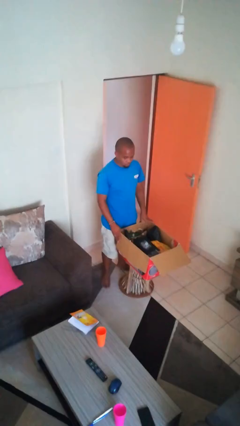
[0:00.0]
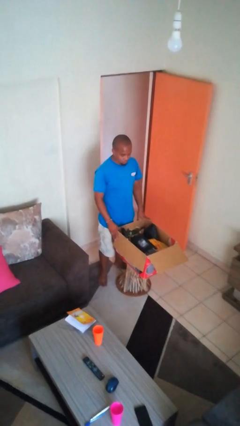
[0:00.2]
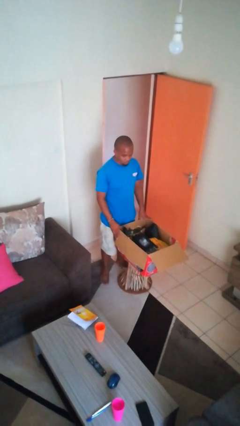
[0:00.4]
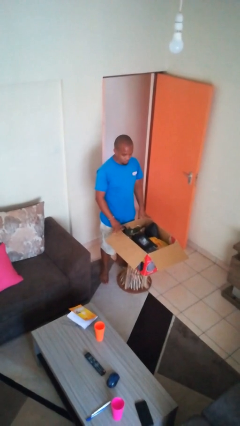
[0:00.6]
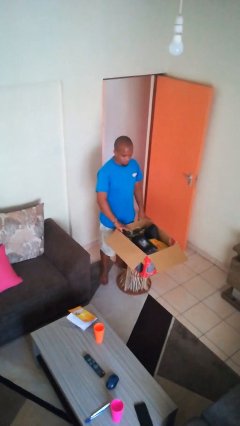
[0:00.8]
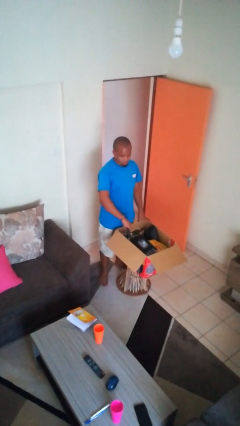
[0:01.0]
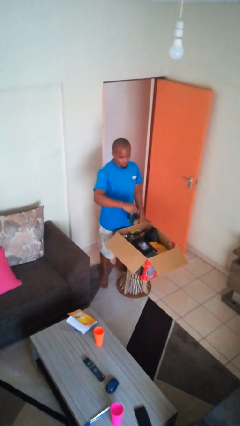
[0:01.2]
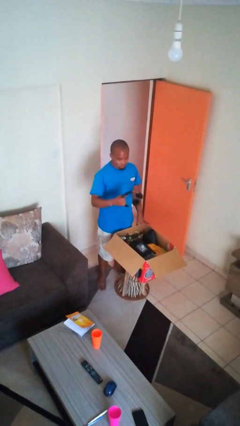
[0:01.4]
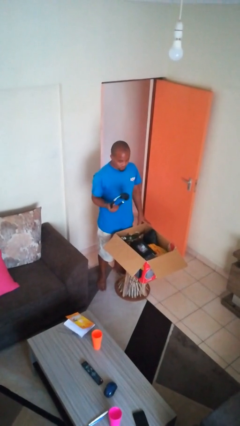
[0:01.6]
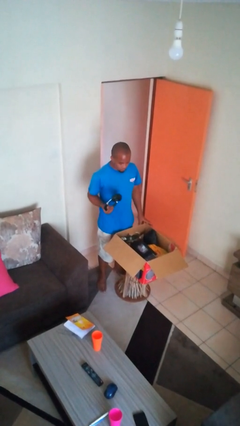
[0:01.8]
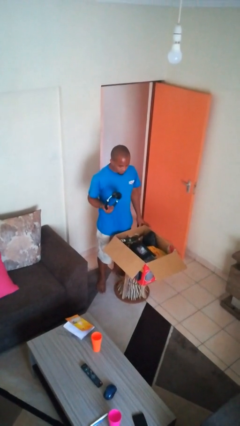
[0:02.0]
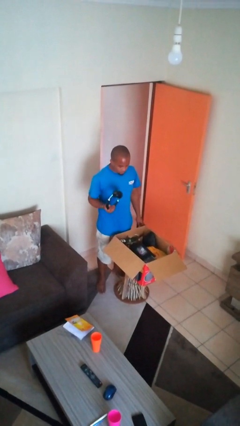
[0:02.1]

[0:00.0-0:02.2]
person takes object from box

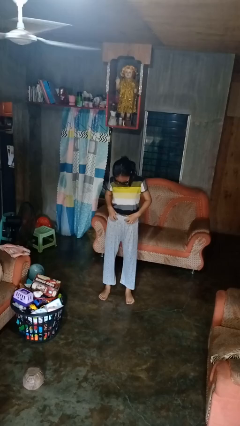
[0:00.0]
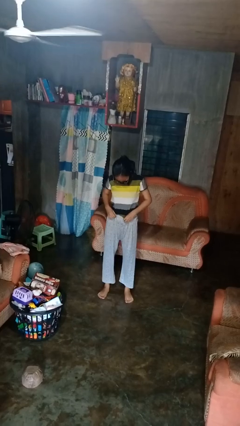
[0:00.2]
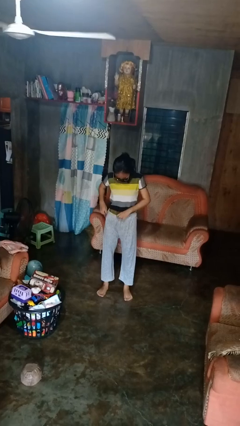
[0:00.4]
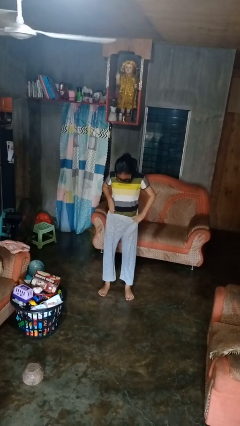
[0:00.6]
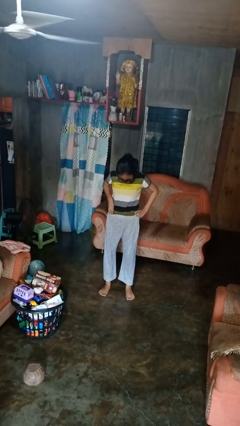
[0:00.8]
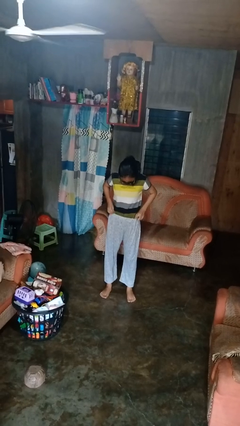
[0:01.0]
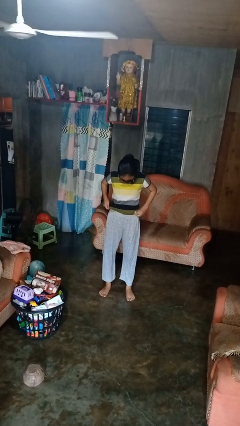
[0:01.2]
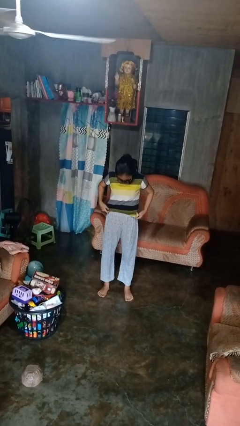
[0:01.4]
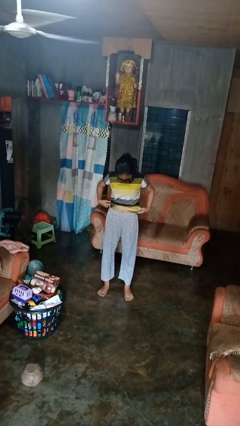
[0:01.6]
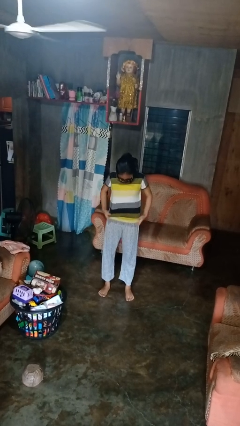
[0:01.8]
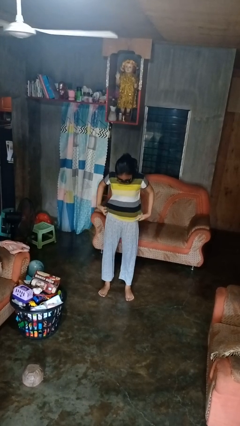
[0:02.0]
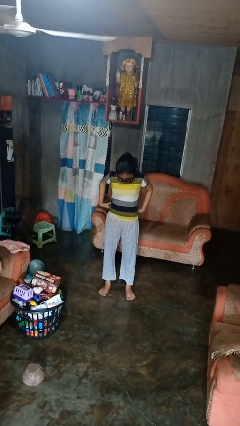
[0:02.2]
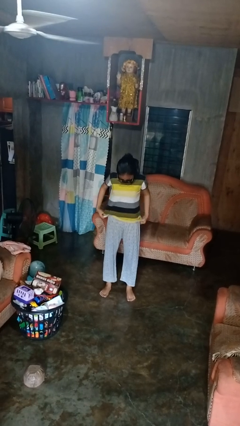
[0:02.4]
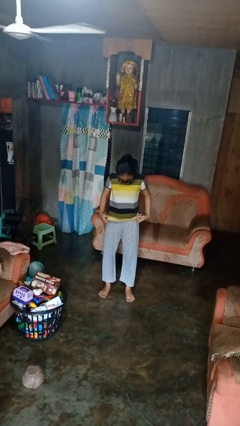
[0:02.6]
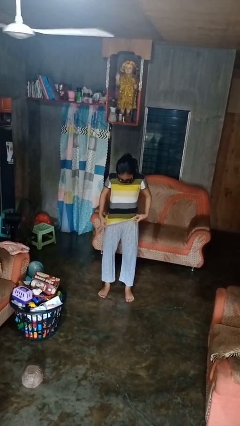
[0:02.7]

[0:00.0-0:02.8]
person untucks shirt

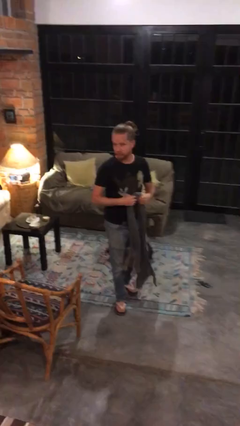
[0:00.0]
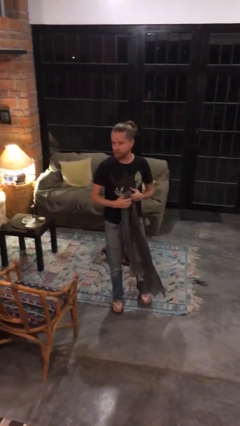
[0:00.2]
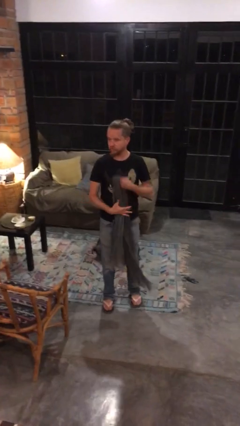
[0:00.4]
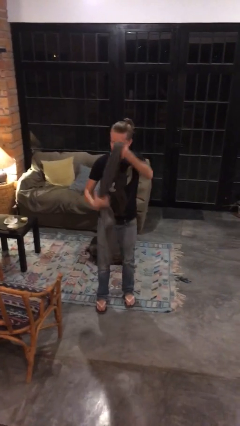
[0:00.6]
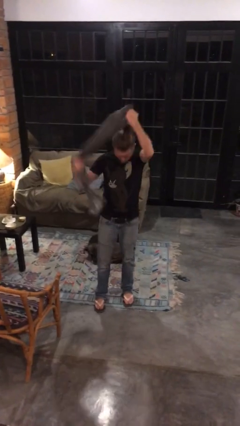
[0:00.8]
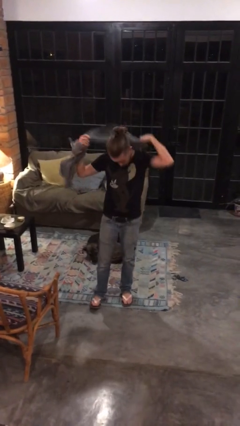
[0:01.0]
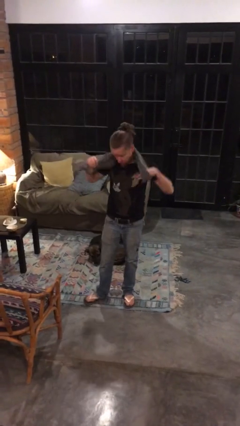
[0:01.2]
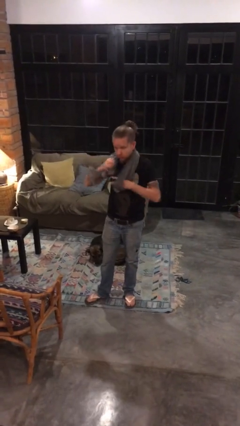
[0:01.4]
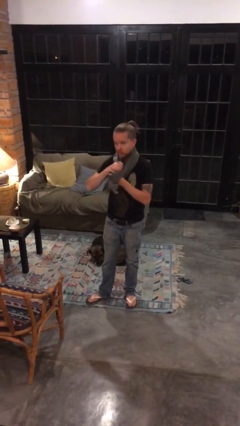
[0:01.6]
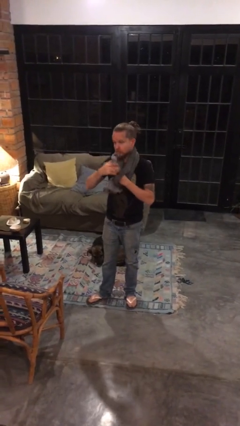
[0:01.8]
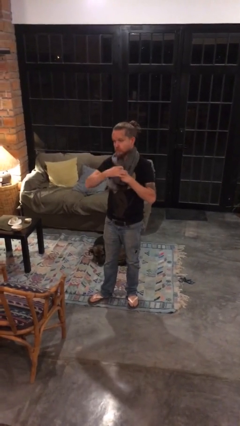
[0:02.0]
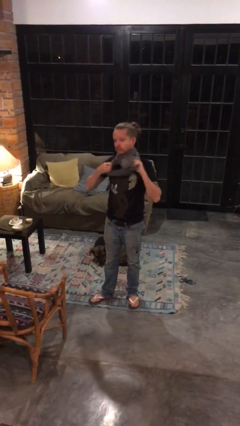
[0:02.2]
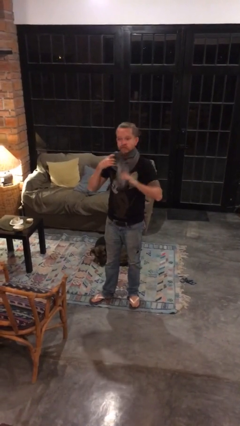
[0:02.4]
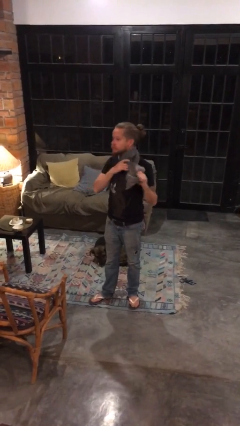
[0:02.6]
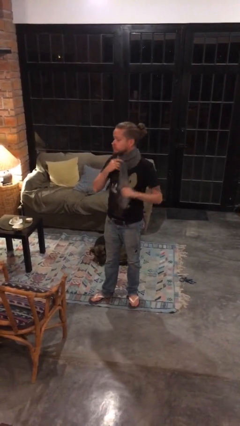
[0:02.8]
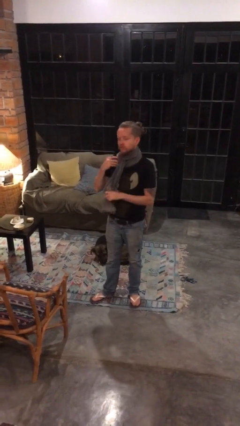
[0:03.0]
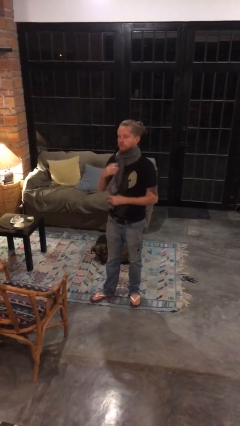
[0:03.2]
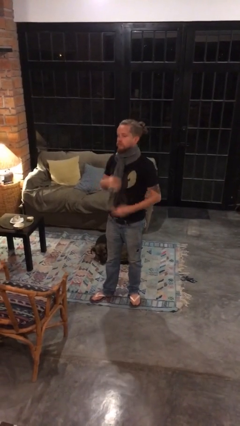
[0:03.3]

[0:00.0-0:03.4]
person puts on scarf

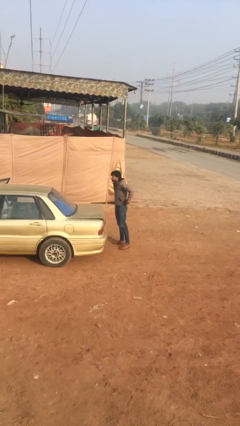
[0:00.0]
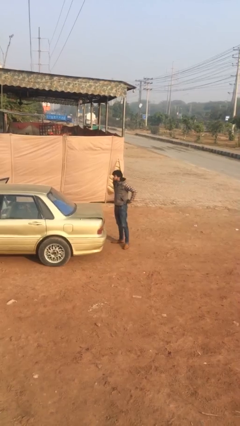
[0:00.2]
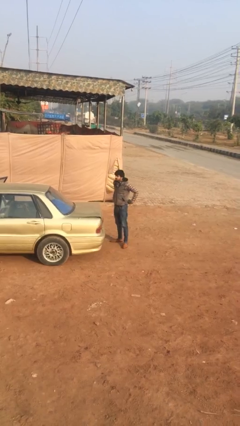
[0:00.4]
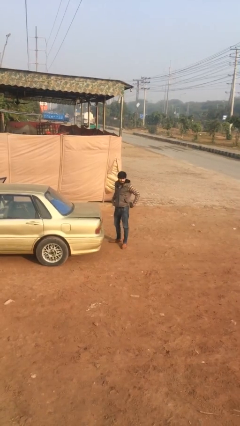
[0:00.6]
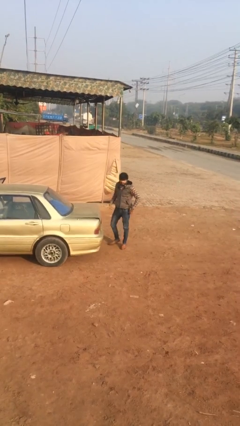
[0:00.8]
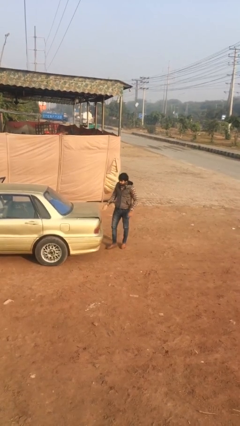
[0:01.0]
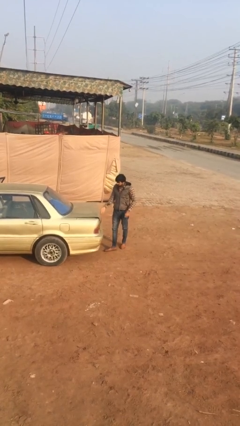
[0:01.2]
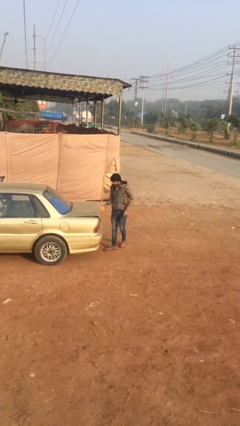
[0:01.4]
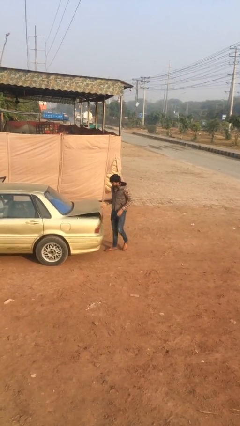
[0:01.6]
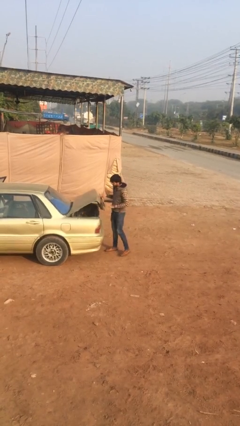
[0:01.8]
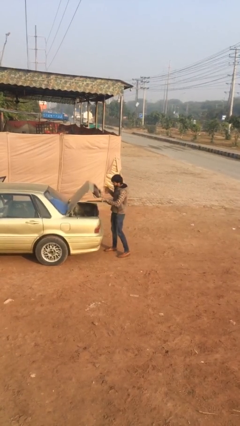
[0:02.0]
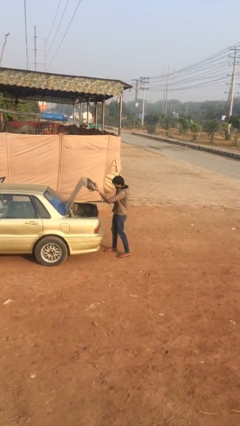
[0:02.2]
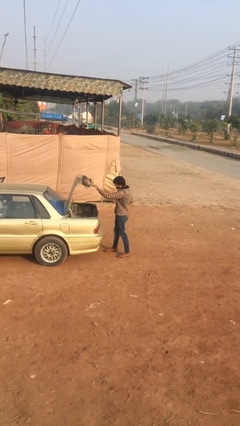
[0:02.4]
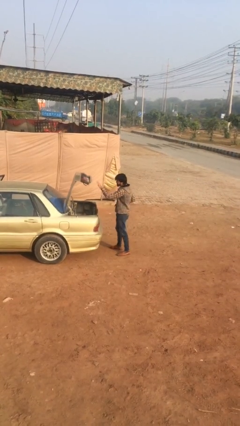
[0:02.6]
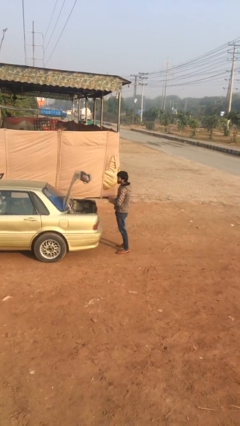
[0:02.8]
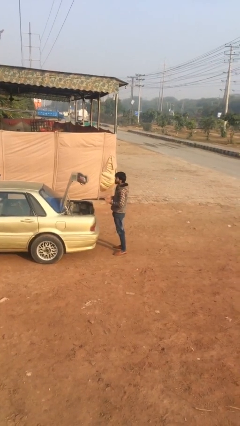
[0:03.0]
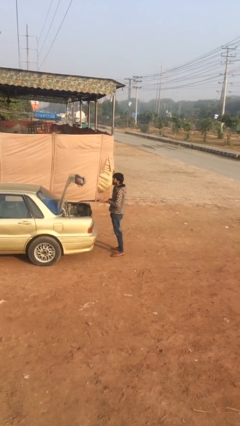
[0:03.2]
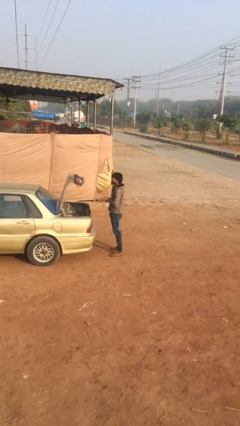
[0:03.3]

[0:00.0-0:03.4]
person opens car trunk

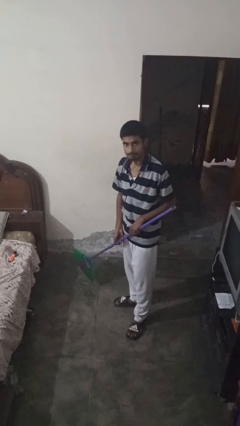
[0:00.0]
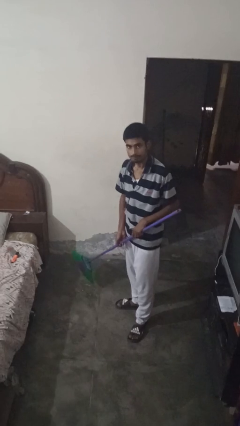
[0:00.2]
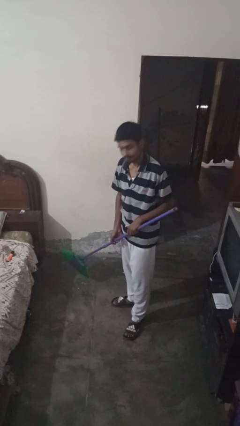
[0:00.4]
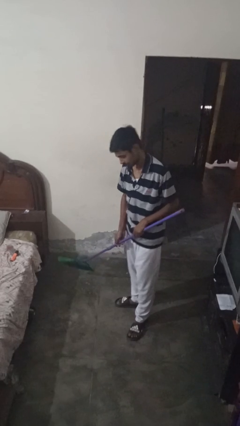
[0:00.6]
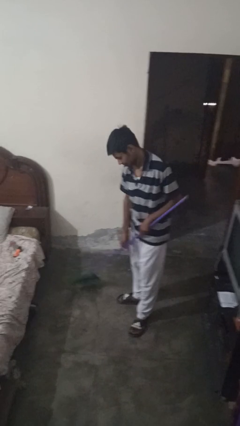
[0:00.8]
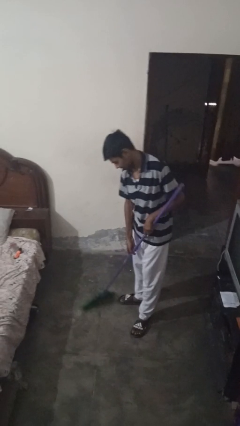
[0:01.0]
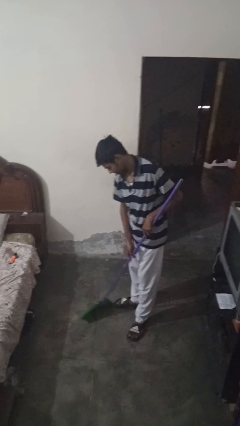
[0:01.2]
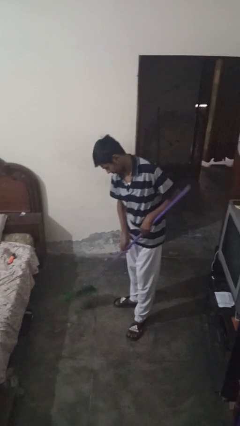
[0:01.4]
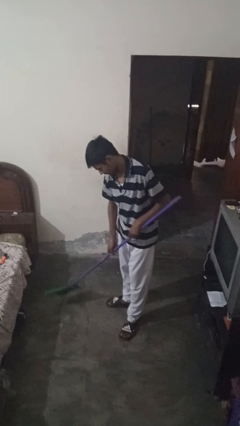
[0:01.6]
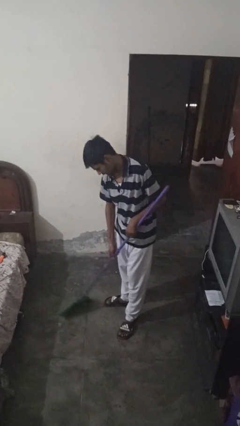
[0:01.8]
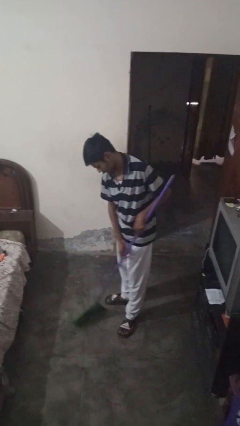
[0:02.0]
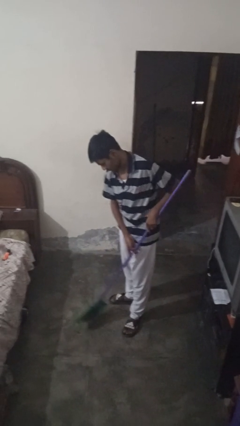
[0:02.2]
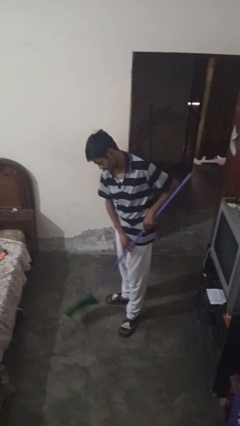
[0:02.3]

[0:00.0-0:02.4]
person sweeps floor

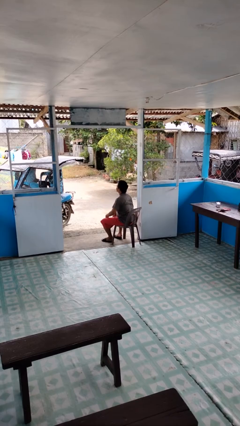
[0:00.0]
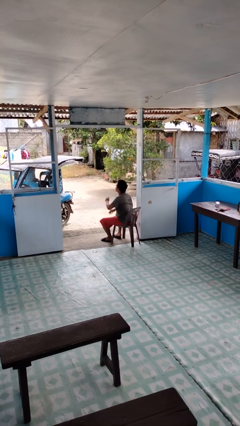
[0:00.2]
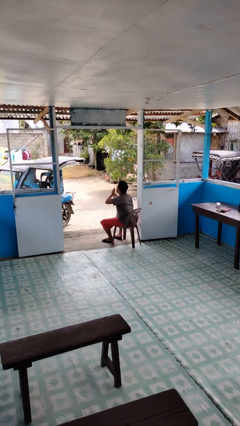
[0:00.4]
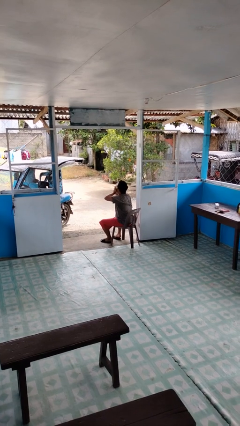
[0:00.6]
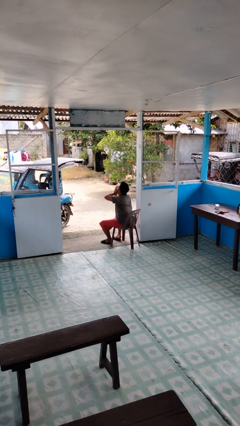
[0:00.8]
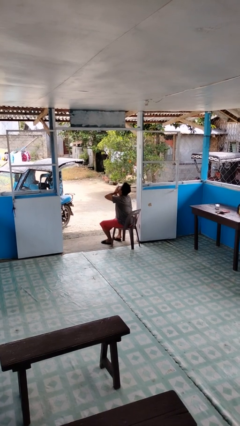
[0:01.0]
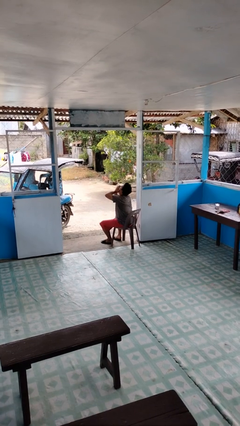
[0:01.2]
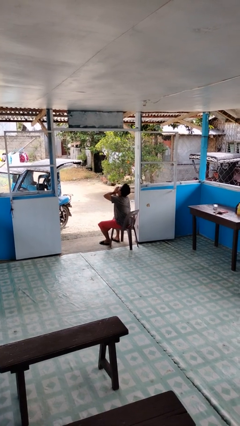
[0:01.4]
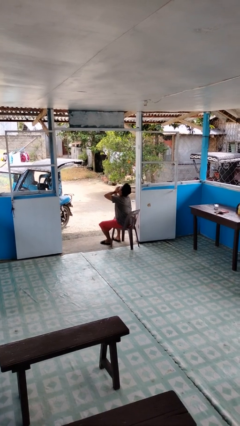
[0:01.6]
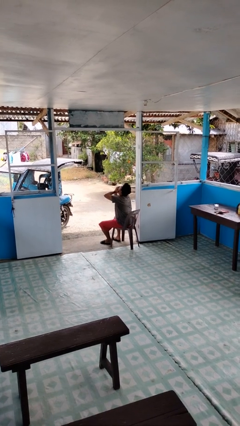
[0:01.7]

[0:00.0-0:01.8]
person yawns

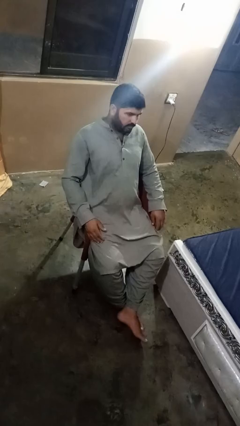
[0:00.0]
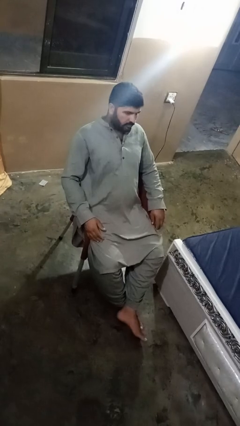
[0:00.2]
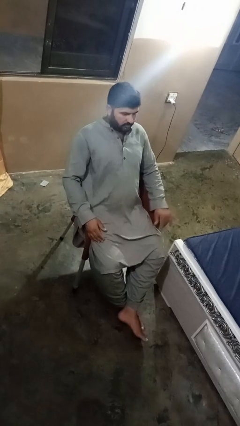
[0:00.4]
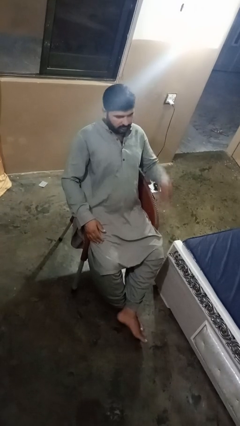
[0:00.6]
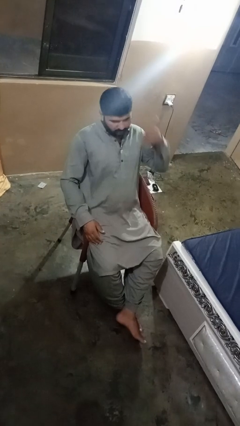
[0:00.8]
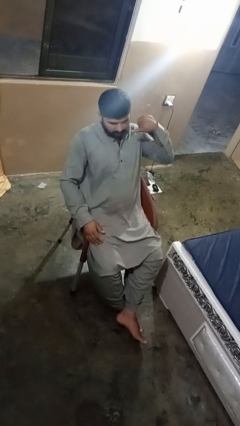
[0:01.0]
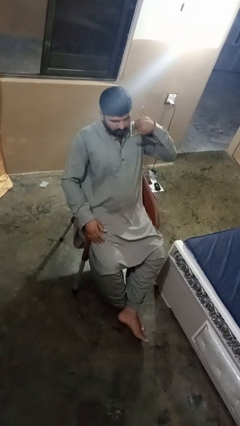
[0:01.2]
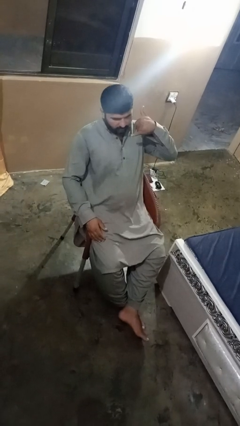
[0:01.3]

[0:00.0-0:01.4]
person gestures call me
